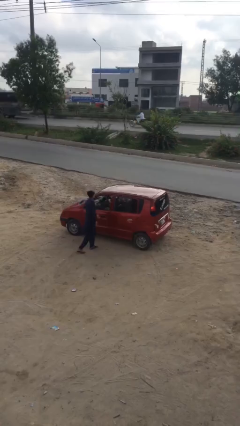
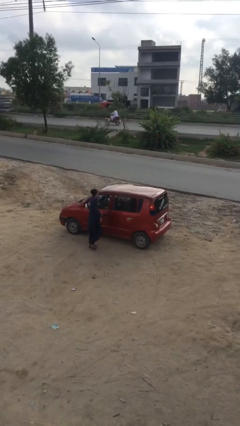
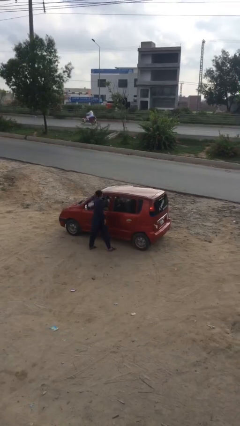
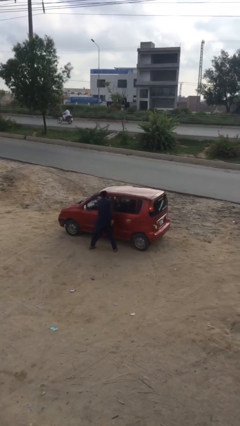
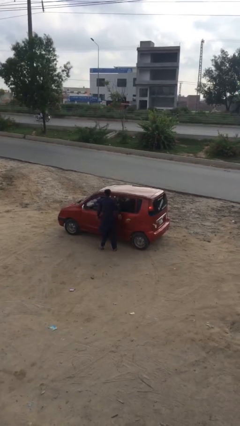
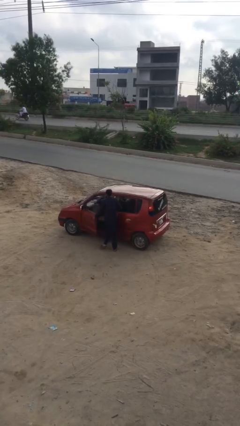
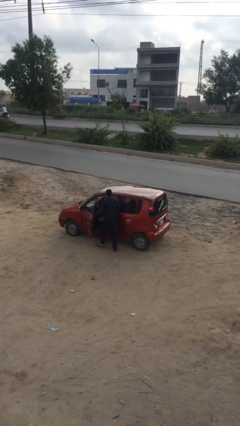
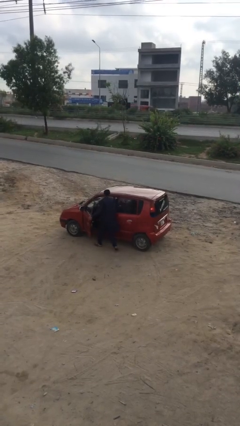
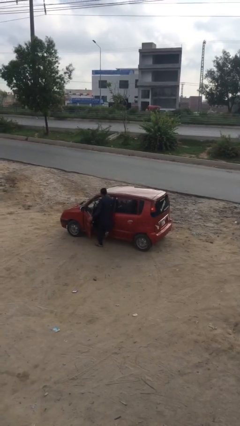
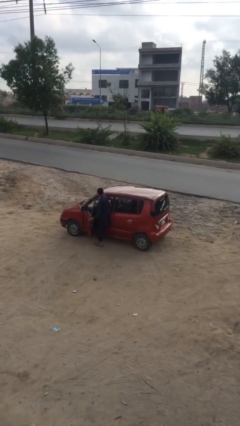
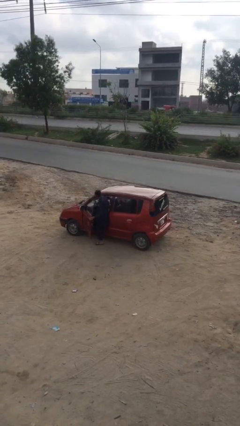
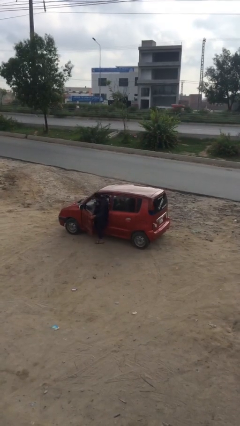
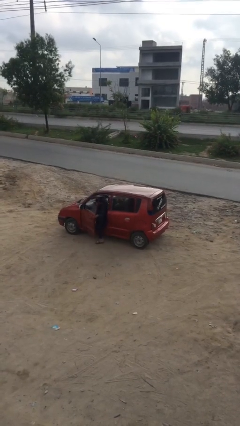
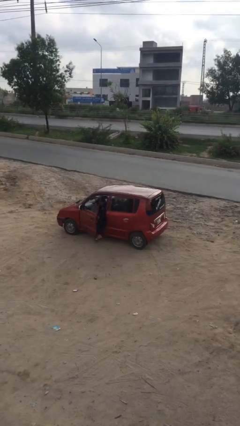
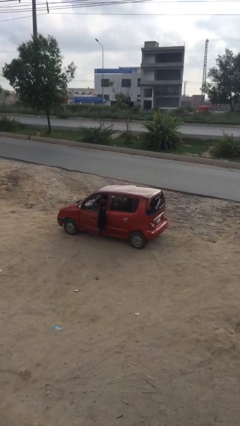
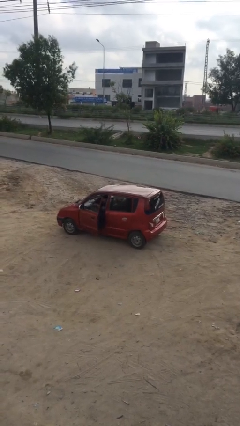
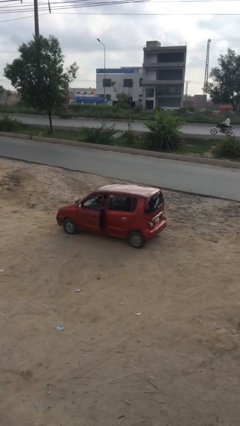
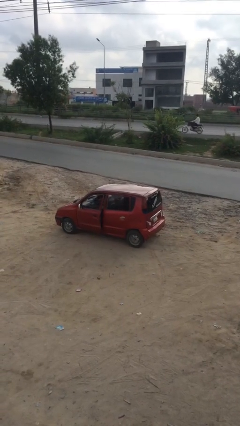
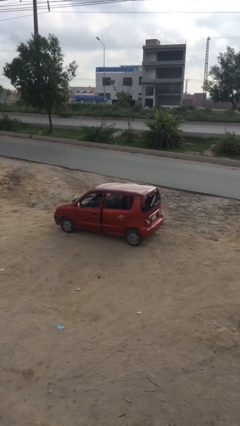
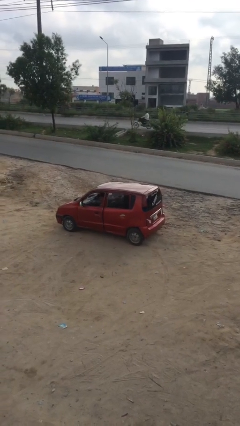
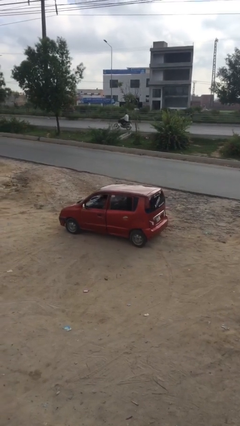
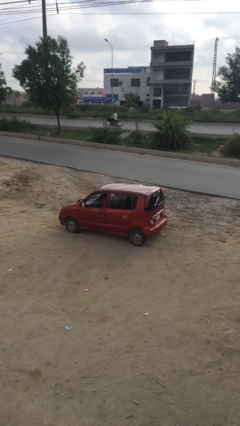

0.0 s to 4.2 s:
car picks up person

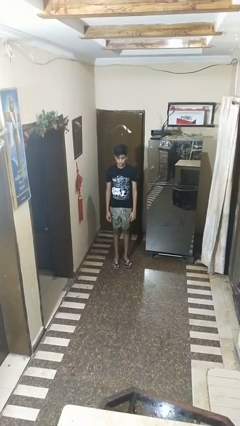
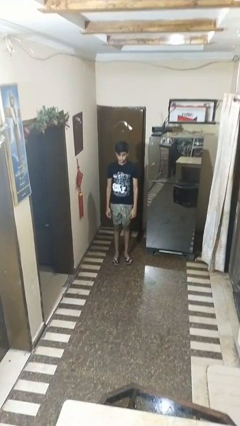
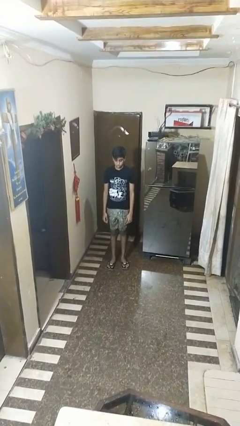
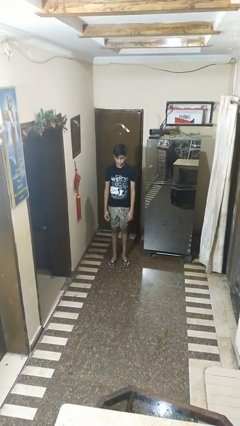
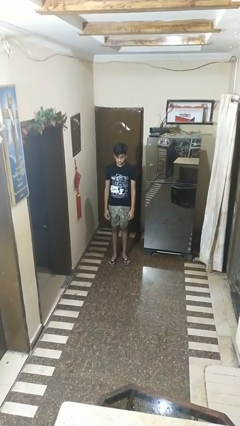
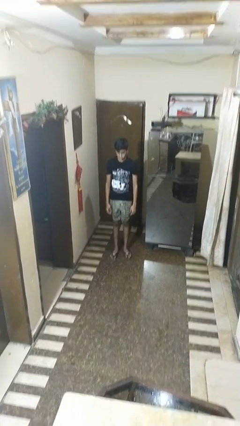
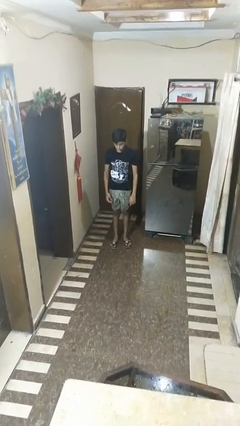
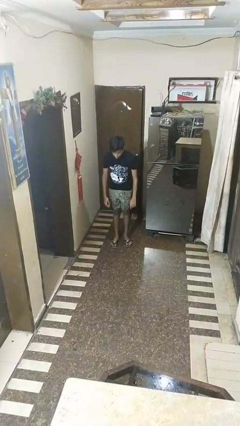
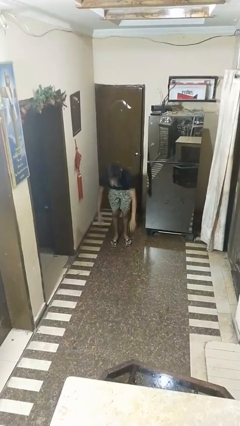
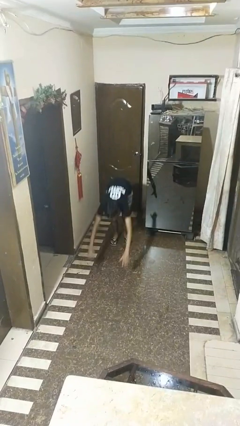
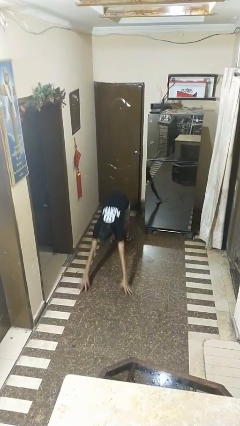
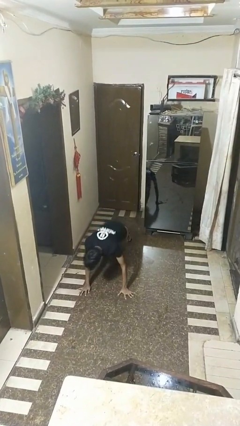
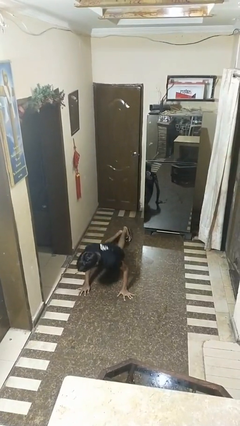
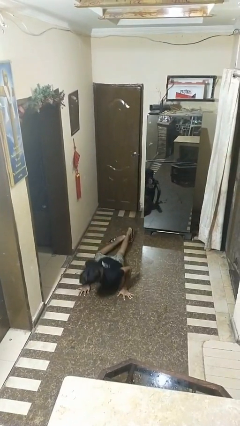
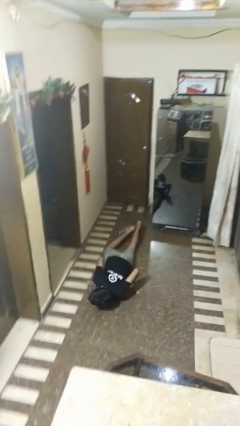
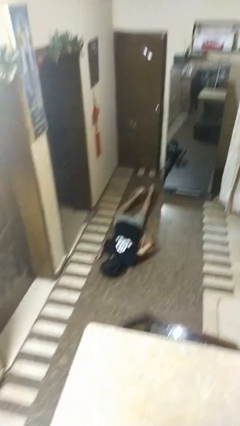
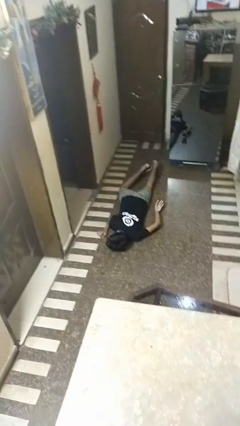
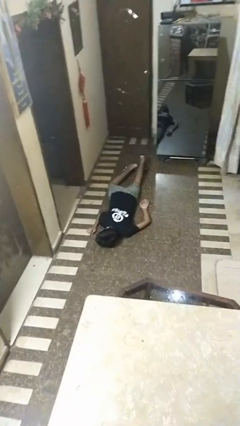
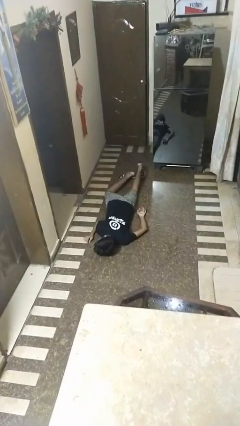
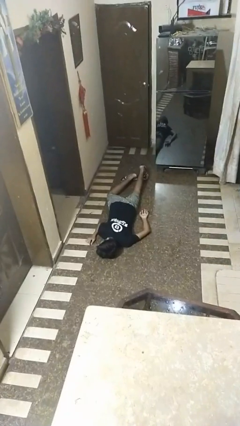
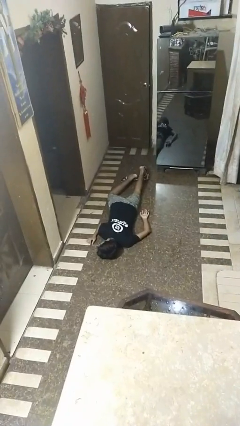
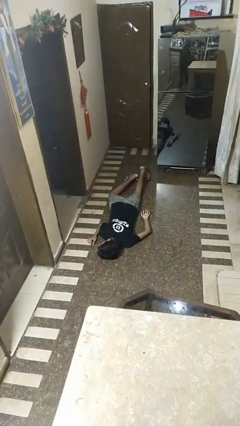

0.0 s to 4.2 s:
person falls while standing

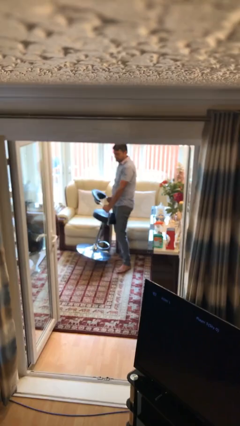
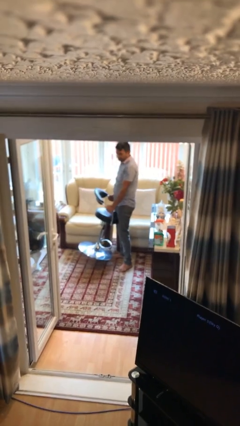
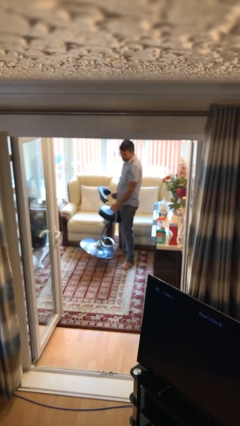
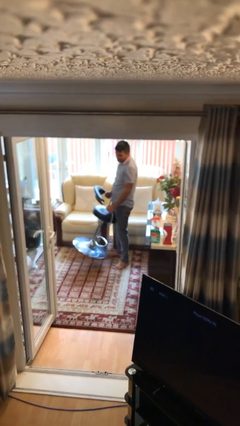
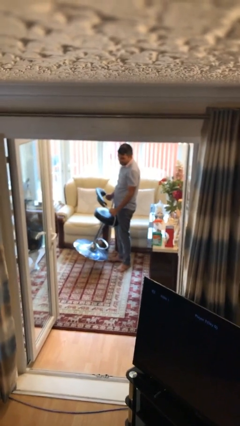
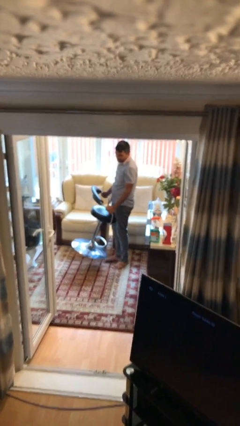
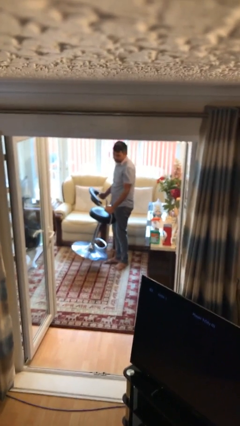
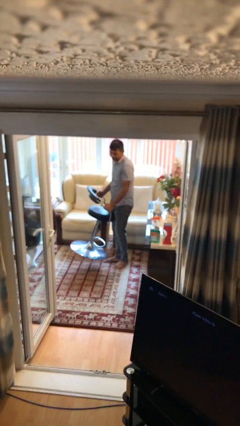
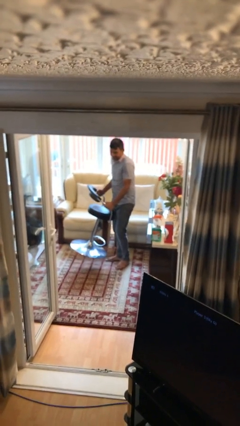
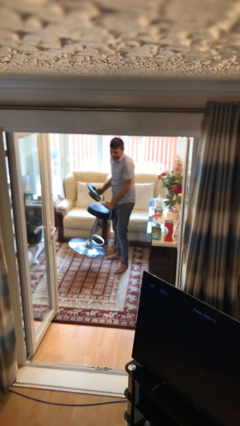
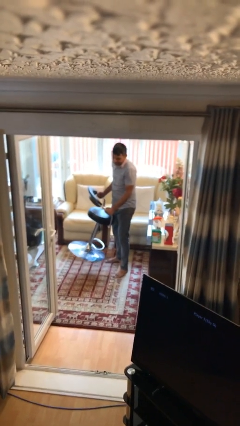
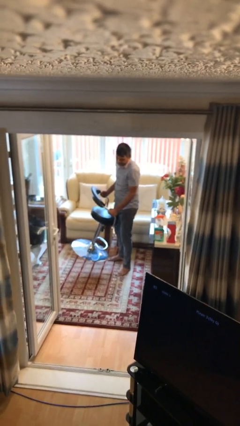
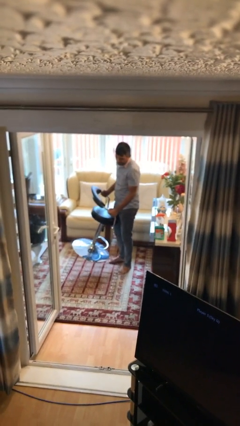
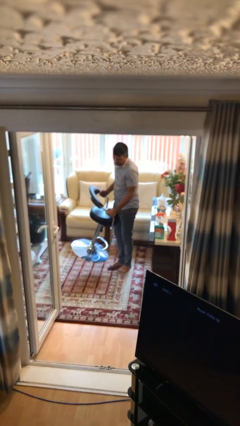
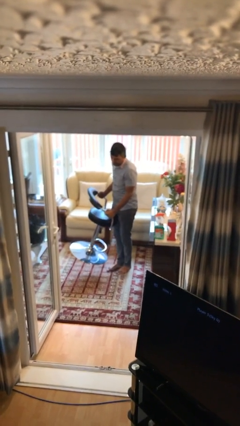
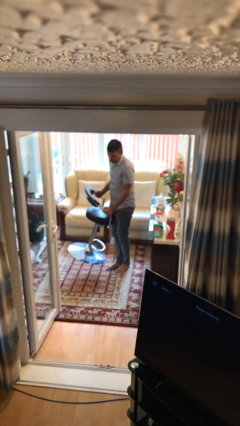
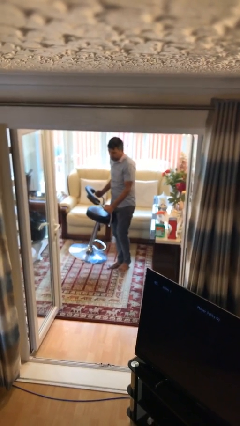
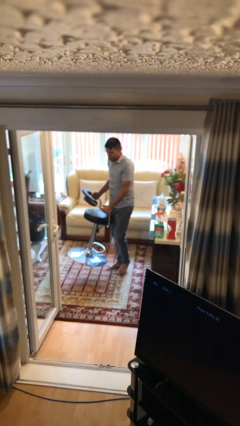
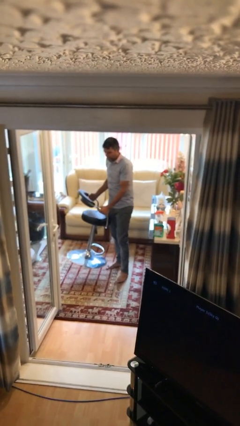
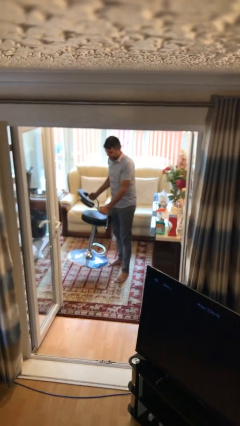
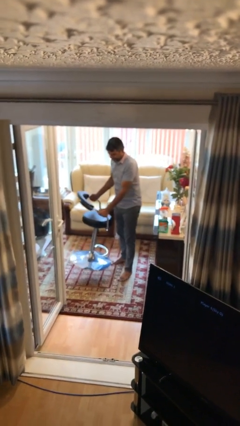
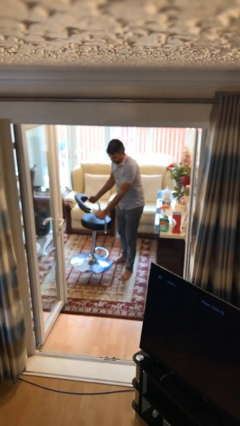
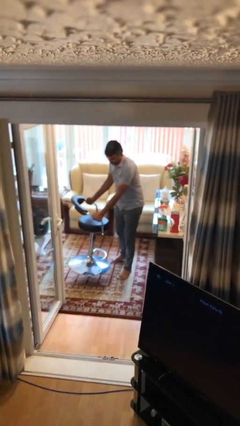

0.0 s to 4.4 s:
person carries heavy object

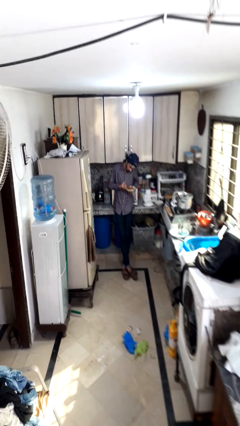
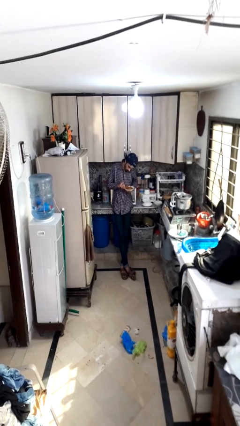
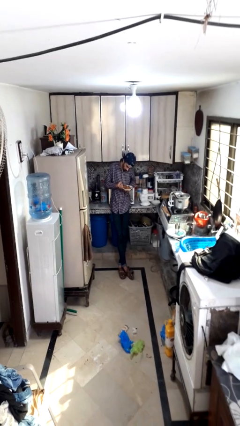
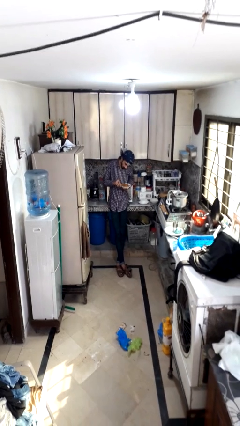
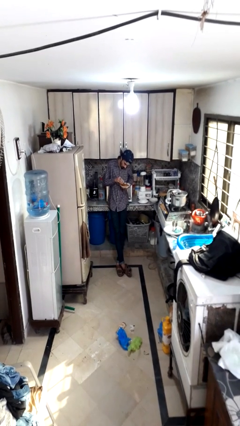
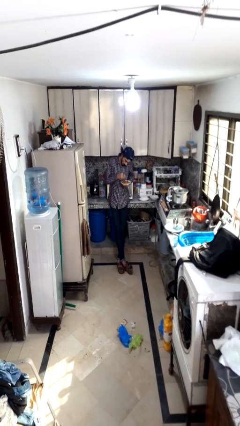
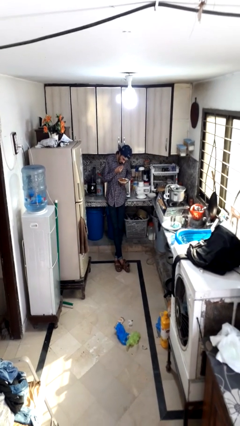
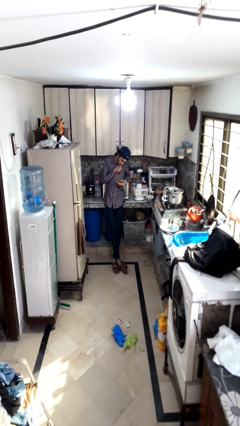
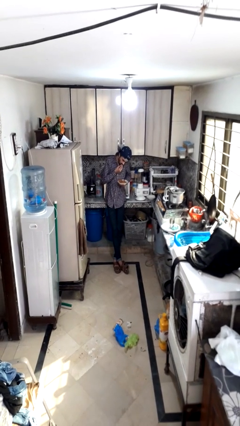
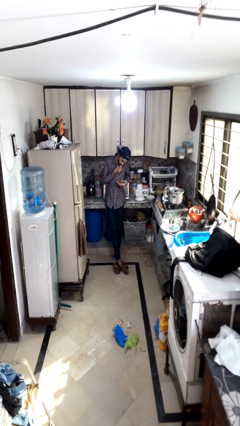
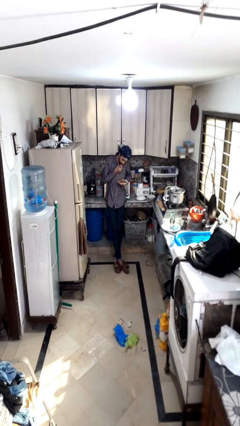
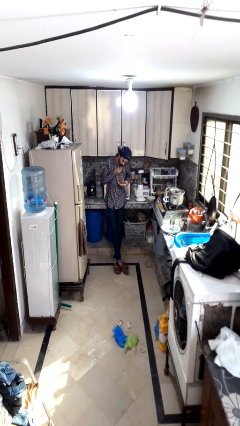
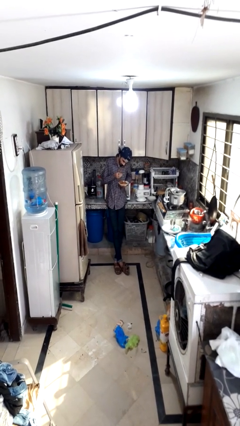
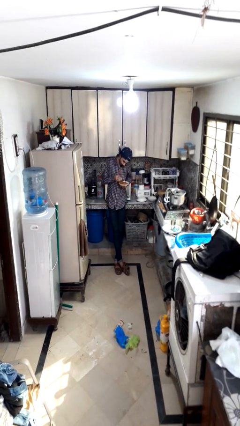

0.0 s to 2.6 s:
person eats with hands

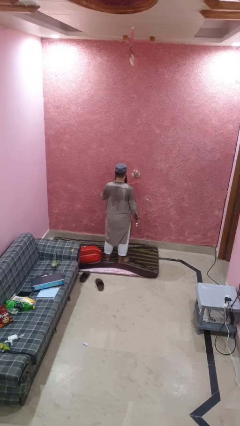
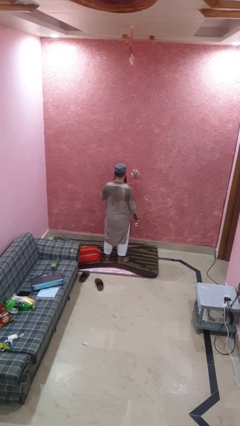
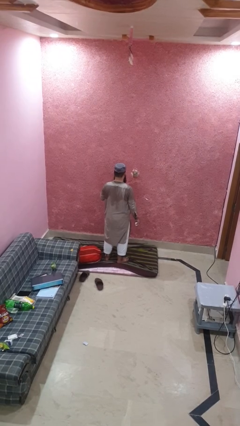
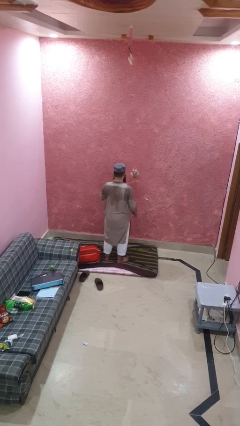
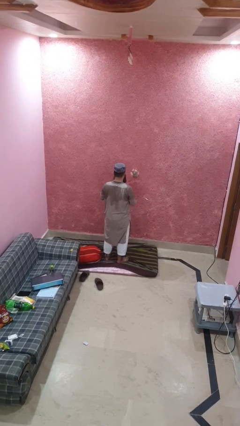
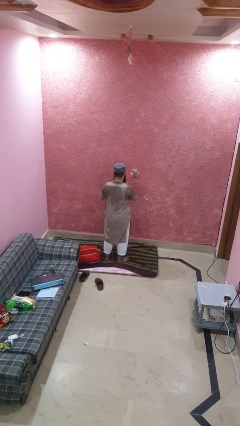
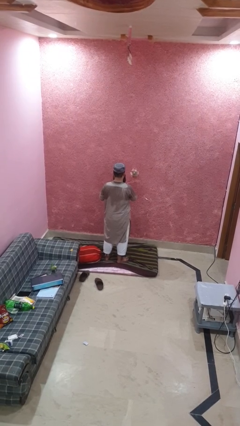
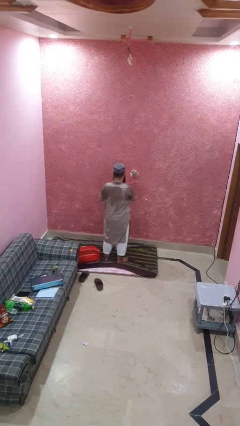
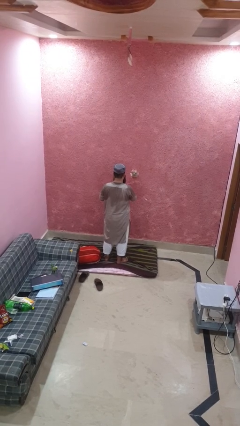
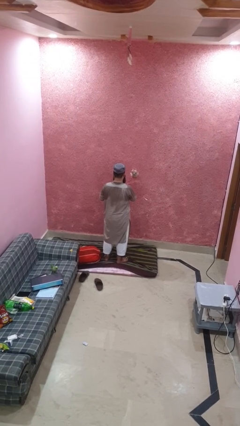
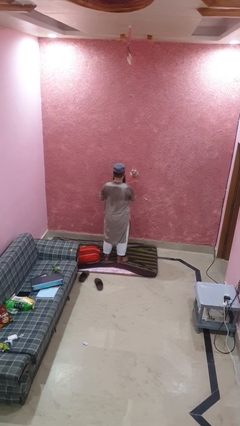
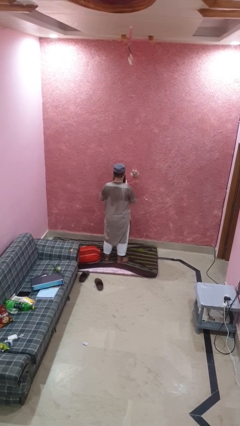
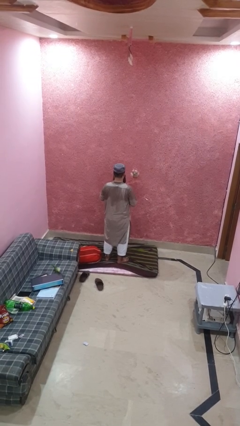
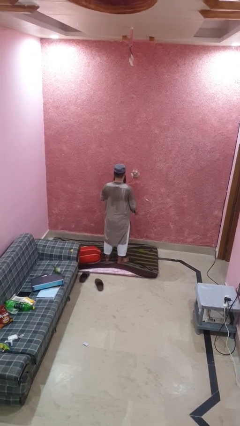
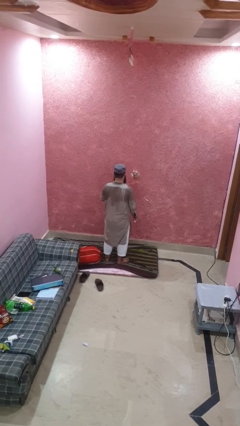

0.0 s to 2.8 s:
person wipes mouth with napkin
